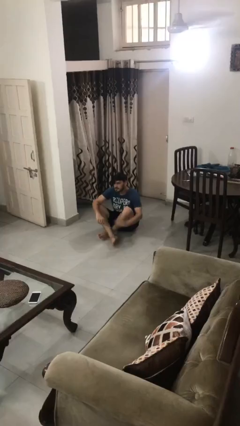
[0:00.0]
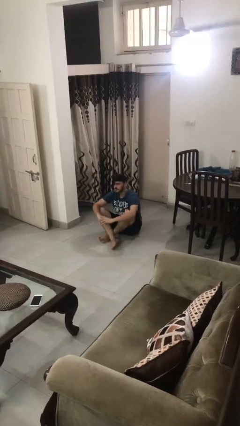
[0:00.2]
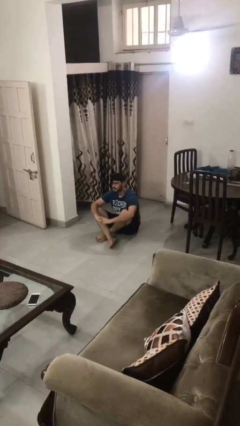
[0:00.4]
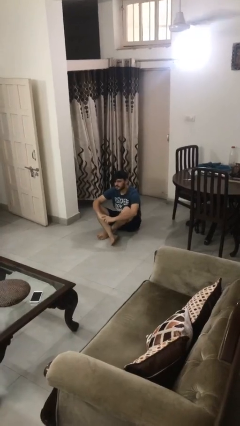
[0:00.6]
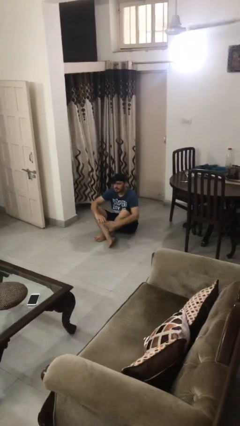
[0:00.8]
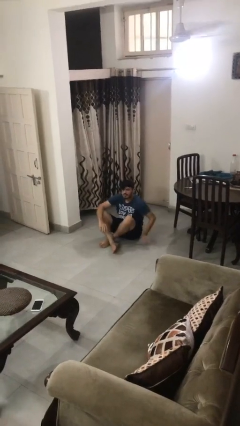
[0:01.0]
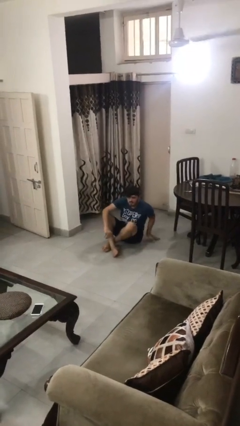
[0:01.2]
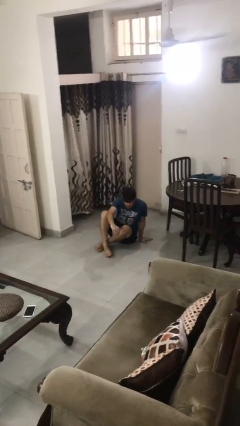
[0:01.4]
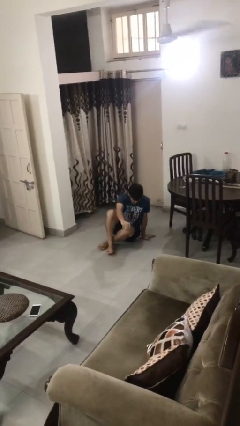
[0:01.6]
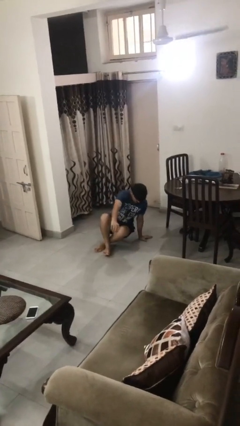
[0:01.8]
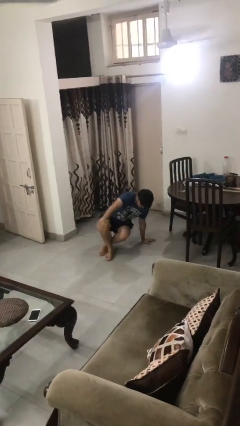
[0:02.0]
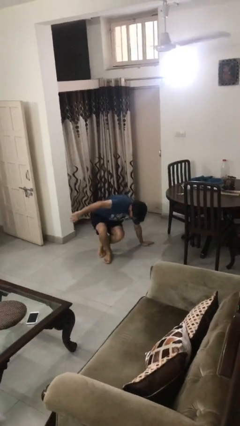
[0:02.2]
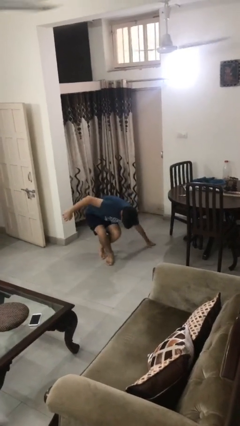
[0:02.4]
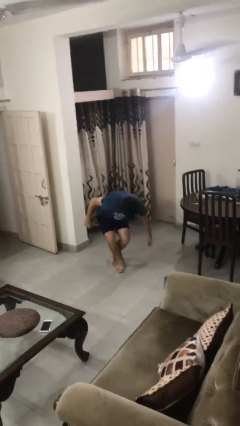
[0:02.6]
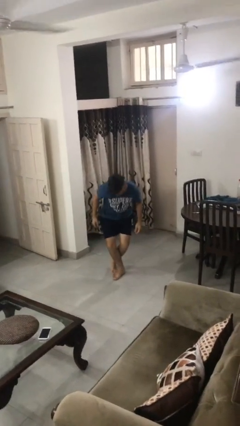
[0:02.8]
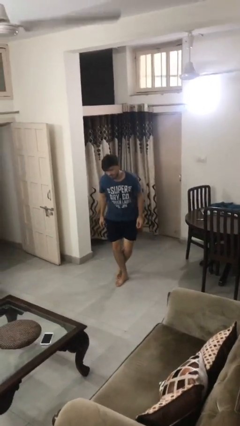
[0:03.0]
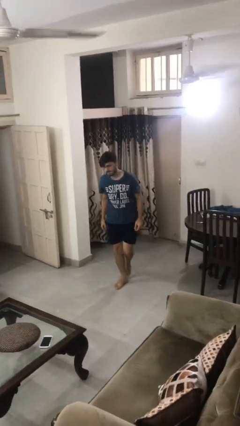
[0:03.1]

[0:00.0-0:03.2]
person stands up from floor

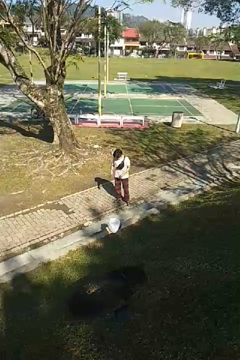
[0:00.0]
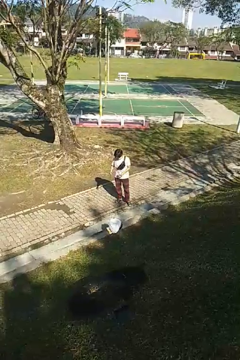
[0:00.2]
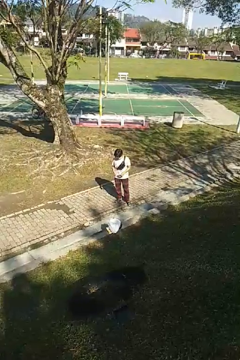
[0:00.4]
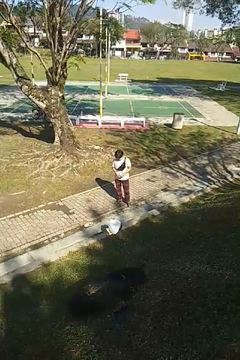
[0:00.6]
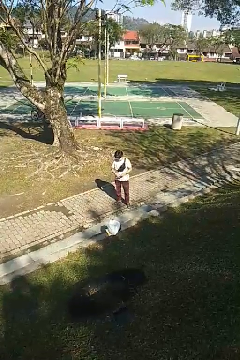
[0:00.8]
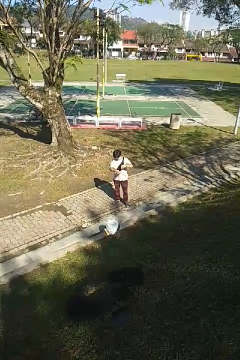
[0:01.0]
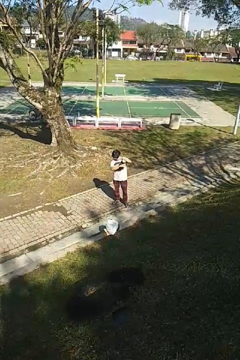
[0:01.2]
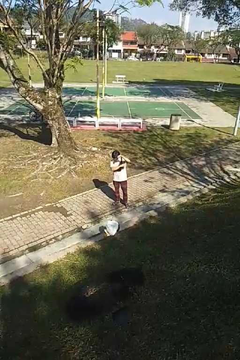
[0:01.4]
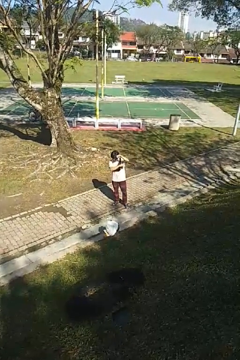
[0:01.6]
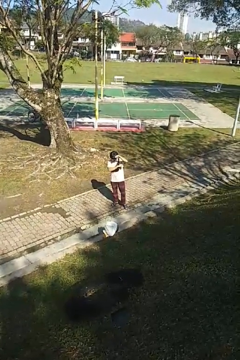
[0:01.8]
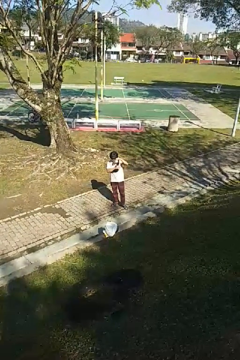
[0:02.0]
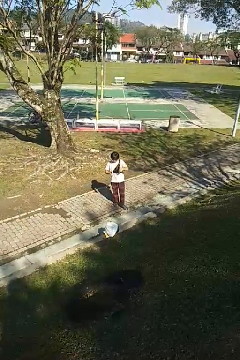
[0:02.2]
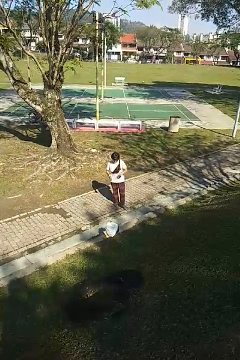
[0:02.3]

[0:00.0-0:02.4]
person applies deodorant

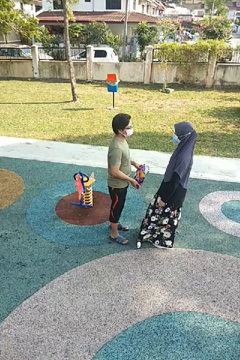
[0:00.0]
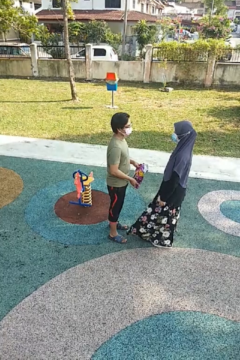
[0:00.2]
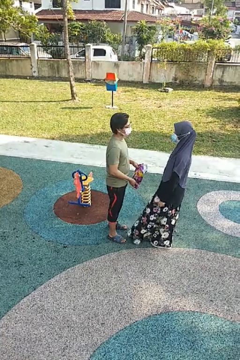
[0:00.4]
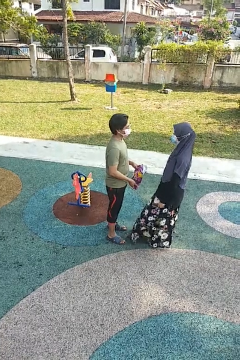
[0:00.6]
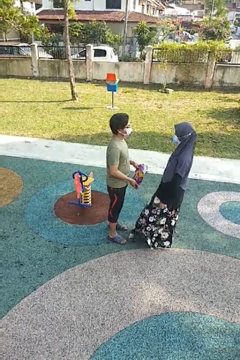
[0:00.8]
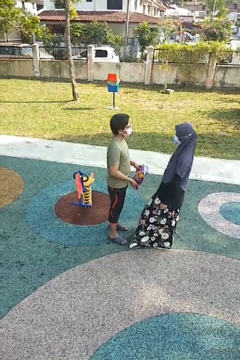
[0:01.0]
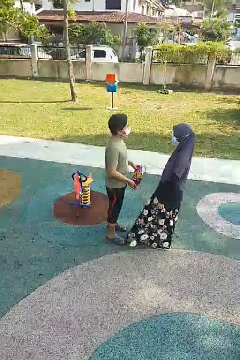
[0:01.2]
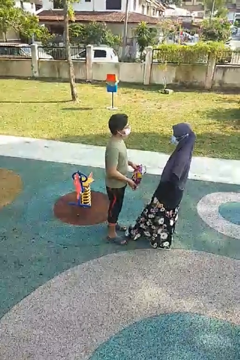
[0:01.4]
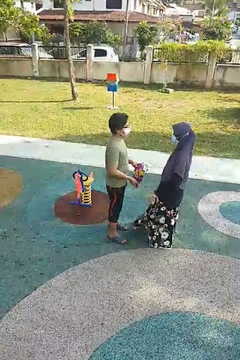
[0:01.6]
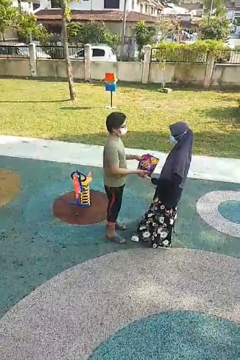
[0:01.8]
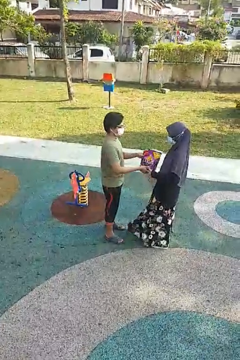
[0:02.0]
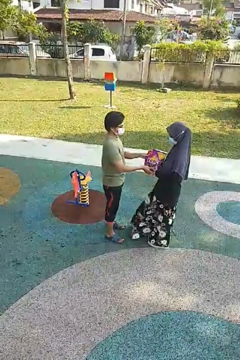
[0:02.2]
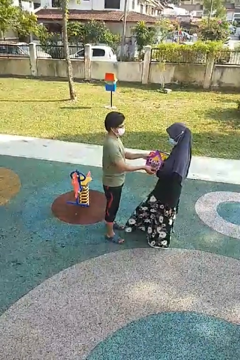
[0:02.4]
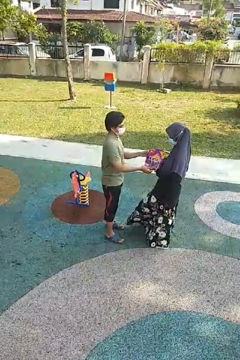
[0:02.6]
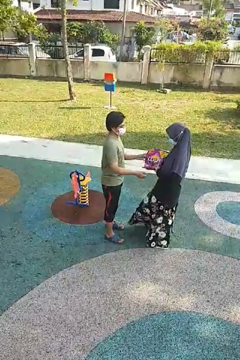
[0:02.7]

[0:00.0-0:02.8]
person transfers object to person

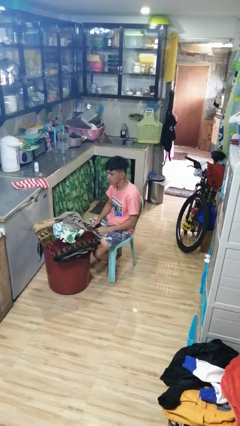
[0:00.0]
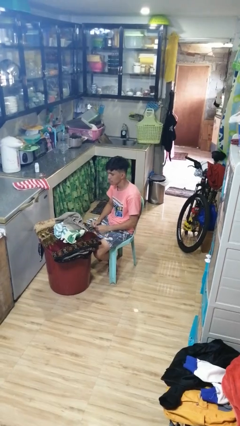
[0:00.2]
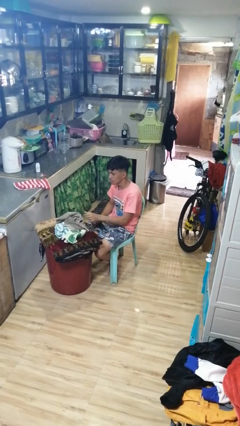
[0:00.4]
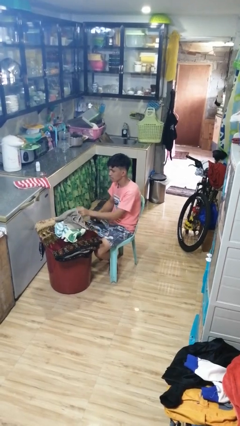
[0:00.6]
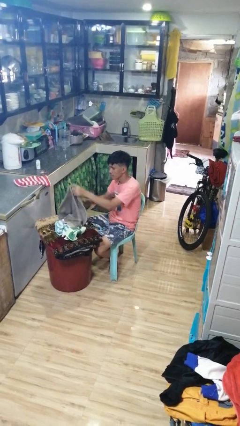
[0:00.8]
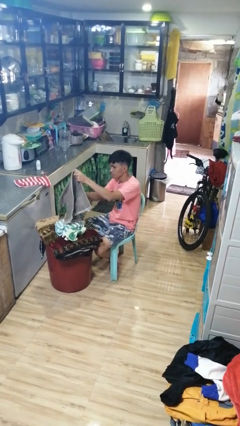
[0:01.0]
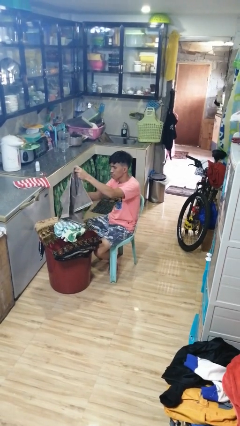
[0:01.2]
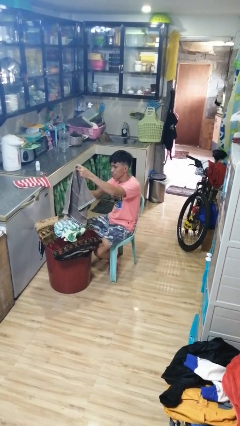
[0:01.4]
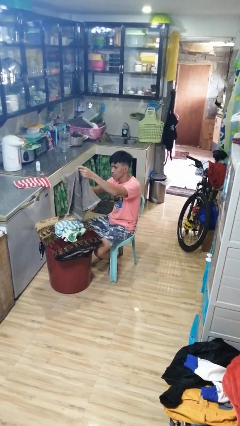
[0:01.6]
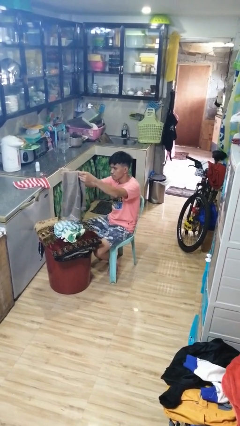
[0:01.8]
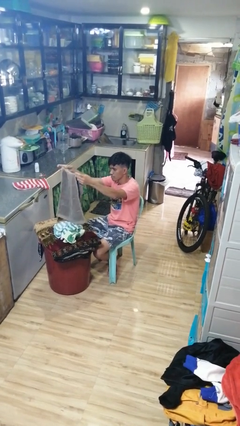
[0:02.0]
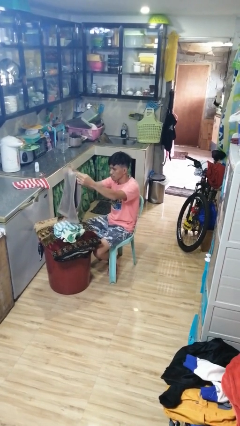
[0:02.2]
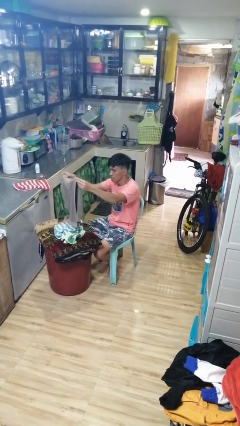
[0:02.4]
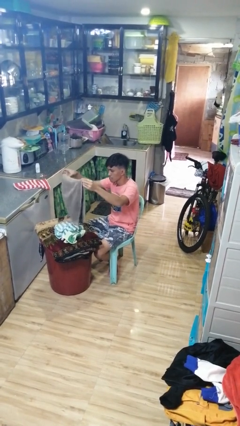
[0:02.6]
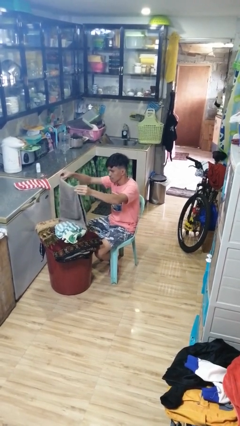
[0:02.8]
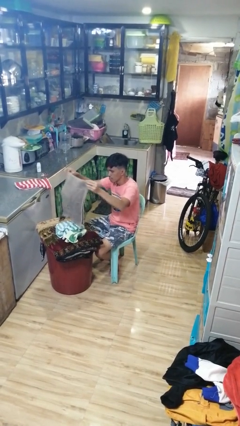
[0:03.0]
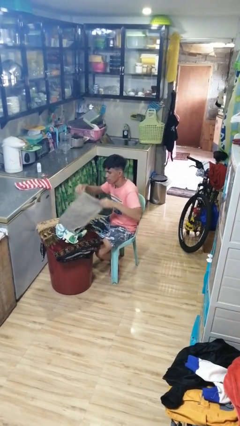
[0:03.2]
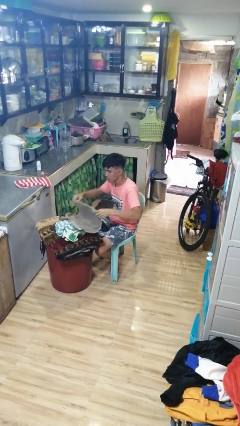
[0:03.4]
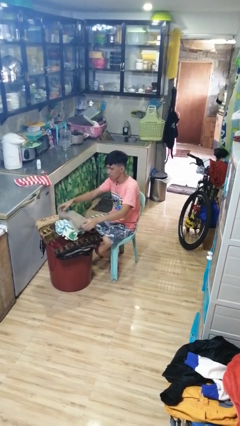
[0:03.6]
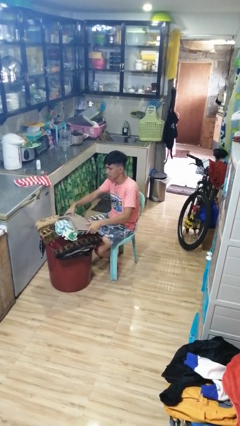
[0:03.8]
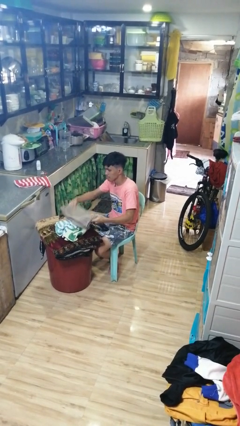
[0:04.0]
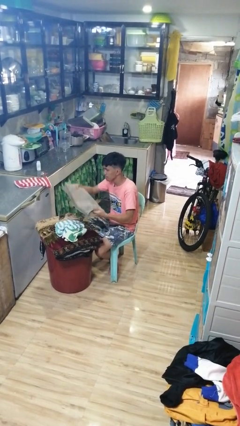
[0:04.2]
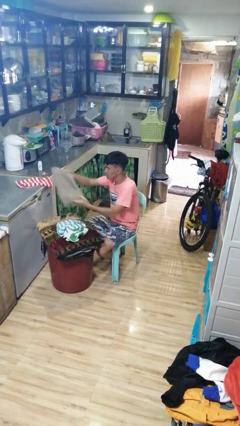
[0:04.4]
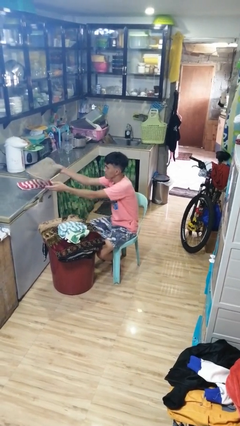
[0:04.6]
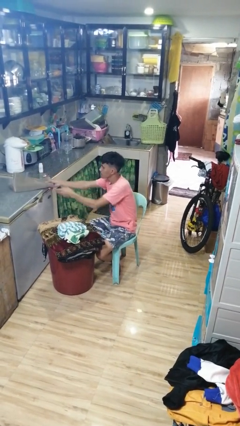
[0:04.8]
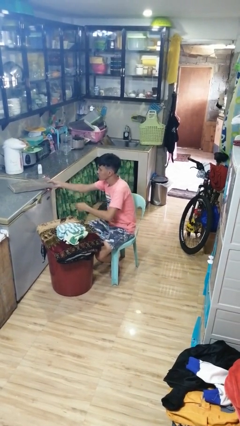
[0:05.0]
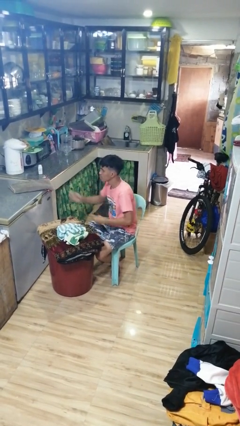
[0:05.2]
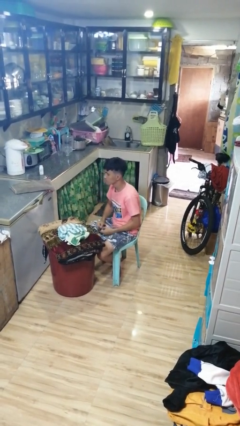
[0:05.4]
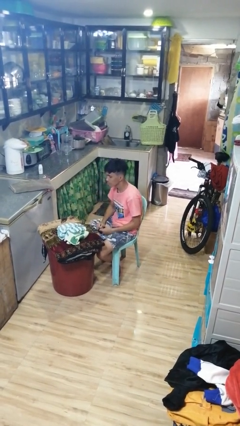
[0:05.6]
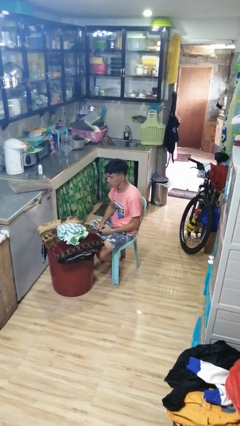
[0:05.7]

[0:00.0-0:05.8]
person folds towel

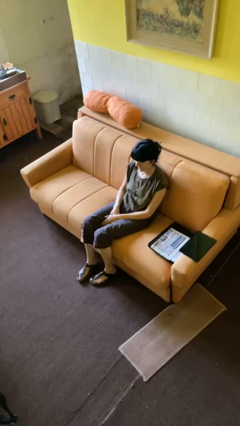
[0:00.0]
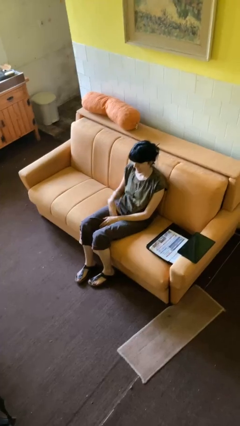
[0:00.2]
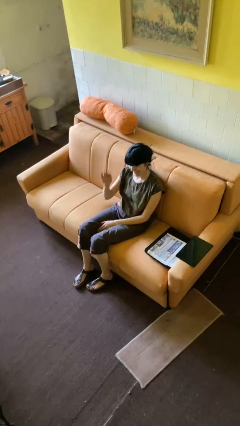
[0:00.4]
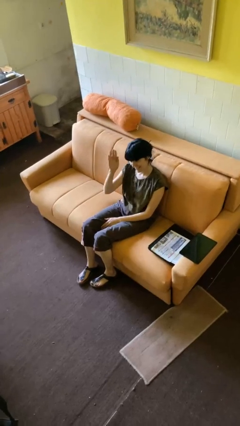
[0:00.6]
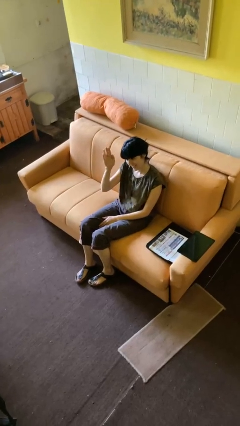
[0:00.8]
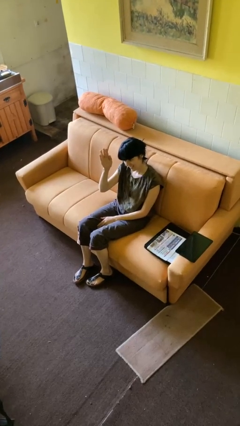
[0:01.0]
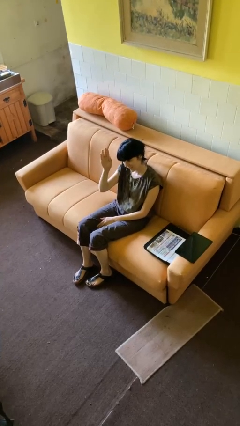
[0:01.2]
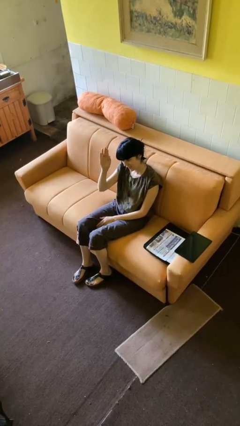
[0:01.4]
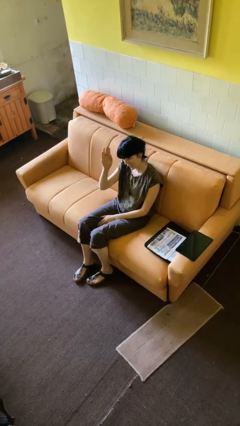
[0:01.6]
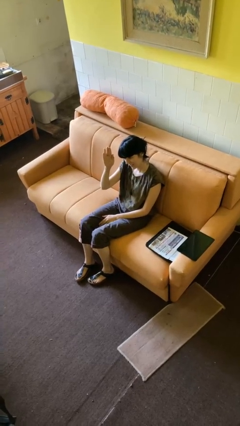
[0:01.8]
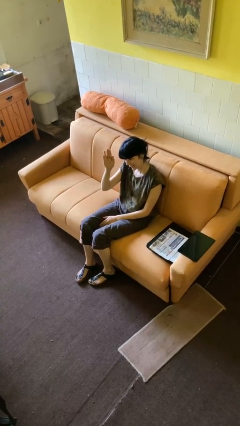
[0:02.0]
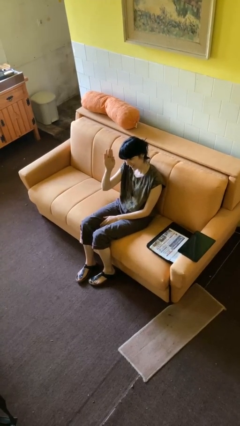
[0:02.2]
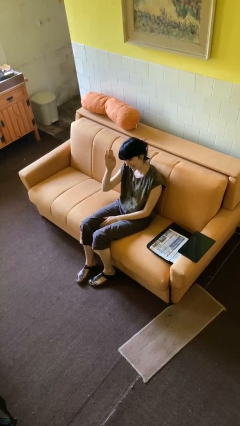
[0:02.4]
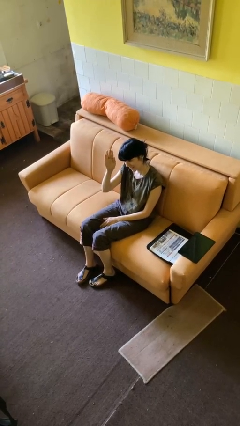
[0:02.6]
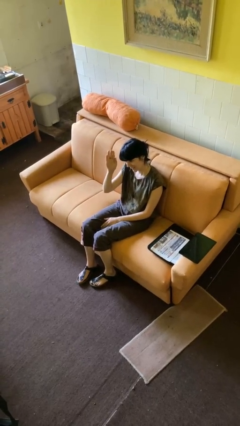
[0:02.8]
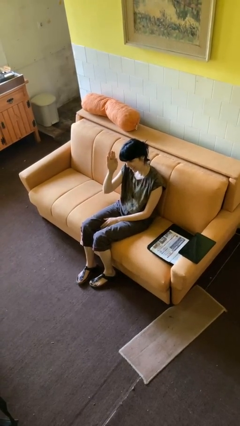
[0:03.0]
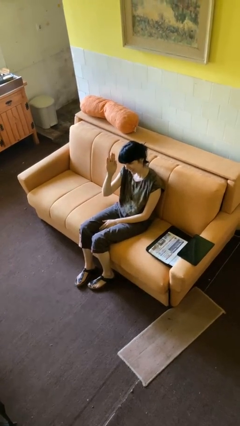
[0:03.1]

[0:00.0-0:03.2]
person waves at person

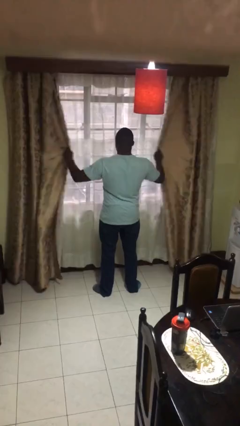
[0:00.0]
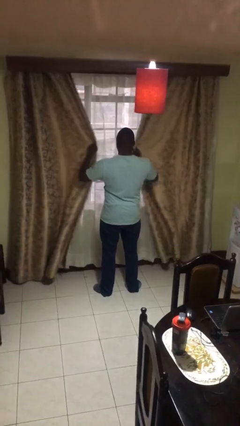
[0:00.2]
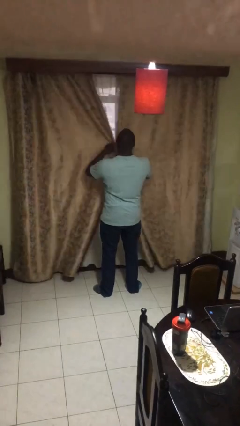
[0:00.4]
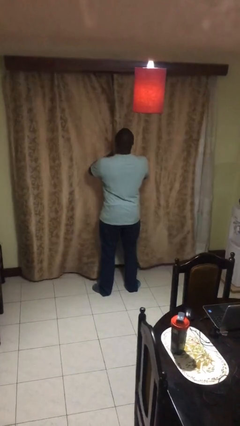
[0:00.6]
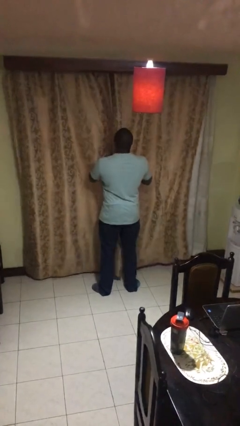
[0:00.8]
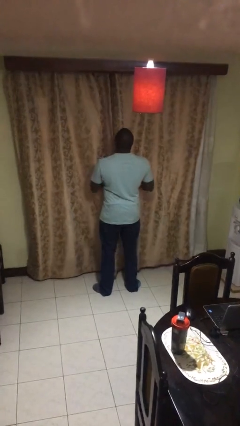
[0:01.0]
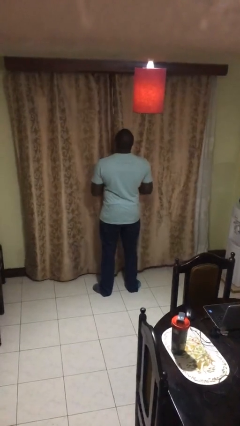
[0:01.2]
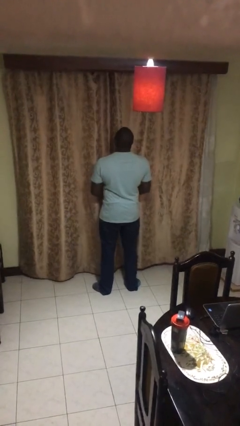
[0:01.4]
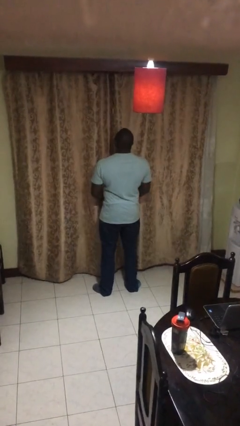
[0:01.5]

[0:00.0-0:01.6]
person closes curtains
